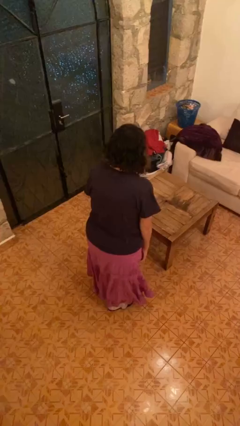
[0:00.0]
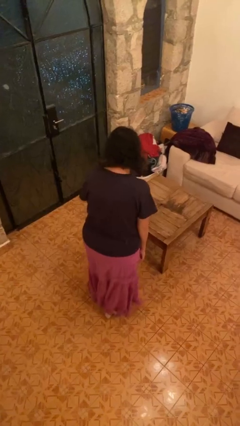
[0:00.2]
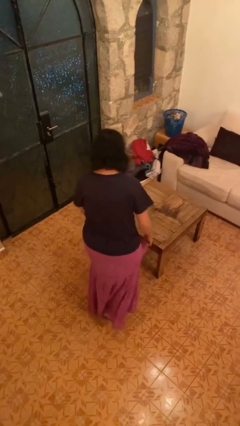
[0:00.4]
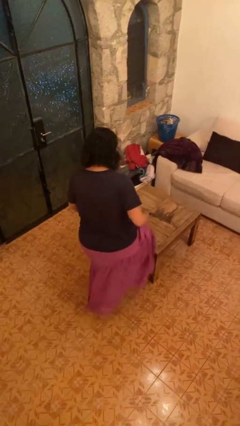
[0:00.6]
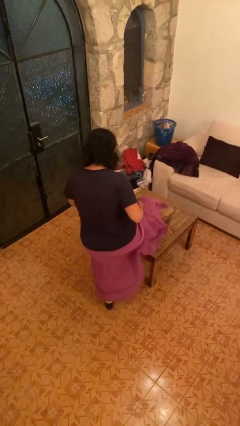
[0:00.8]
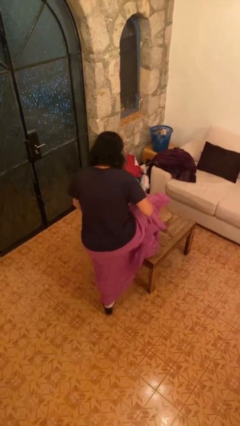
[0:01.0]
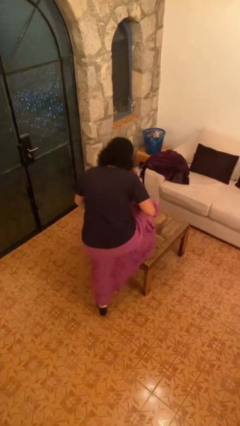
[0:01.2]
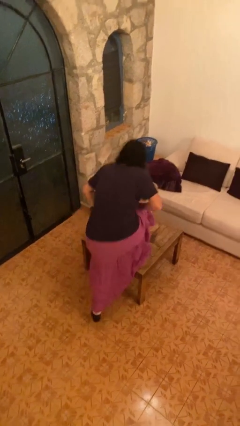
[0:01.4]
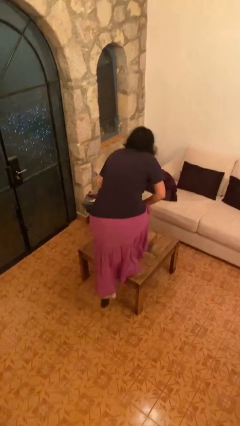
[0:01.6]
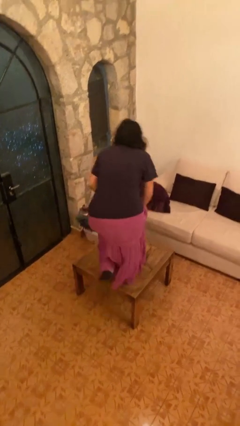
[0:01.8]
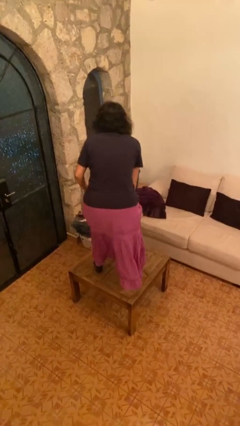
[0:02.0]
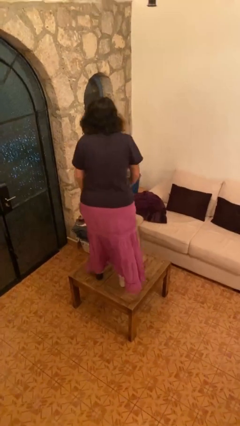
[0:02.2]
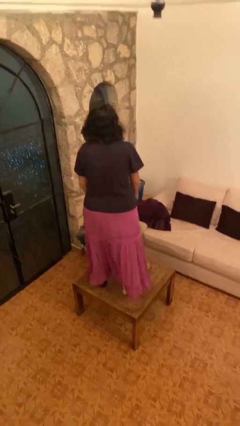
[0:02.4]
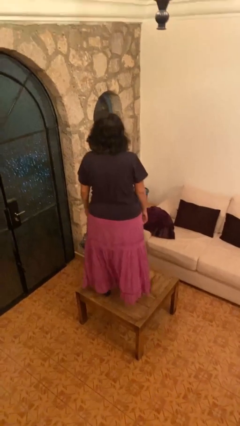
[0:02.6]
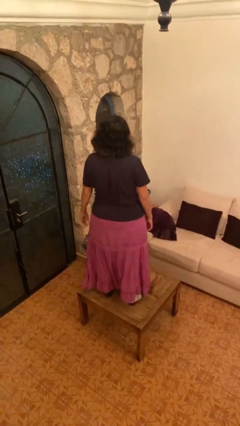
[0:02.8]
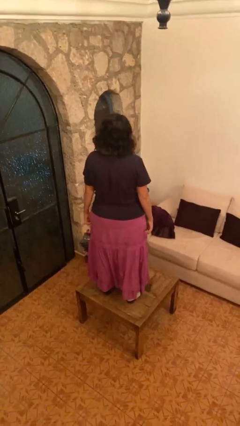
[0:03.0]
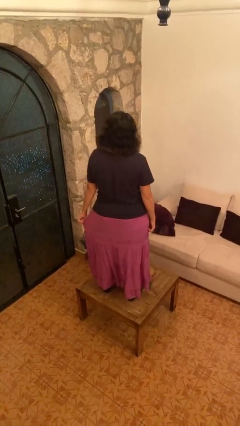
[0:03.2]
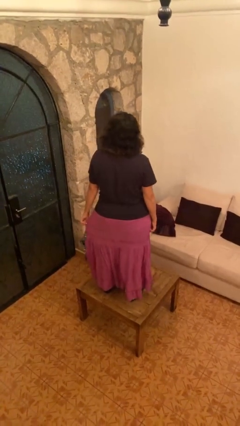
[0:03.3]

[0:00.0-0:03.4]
person climbs on table

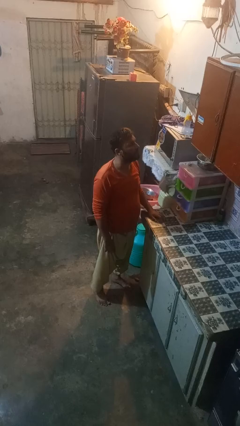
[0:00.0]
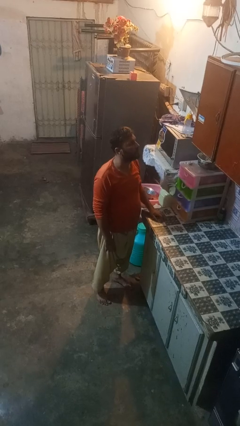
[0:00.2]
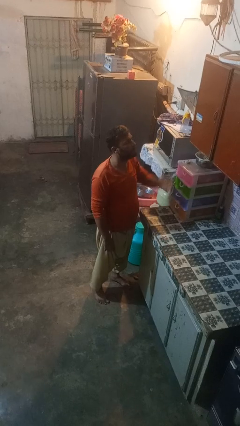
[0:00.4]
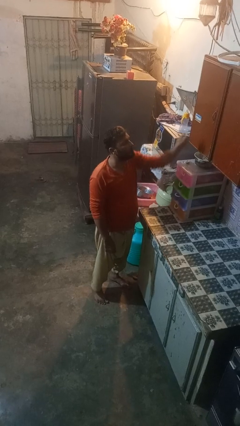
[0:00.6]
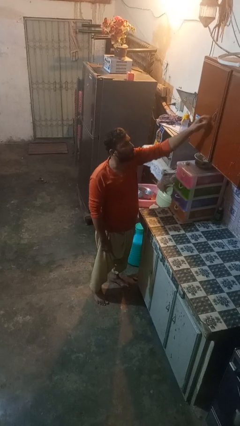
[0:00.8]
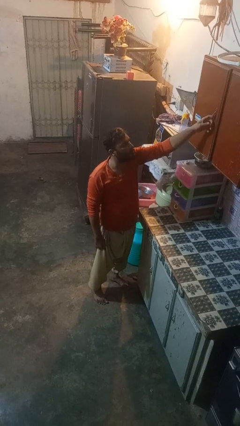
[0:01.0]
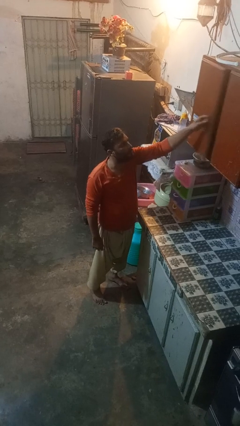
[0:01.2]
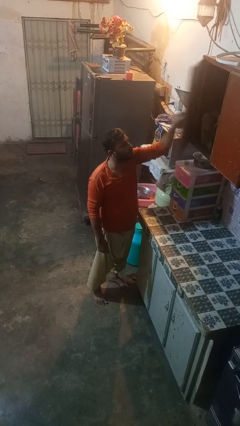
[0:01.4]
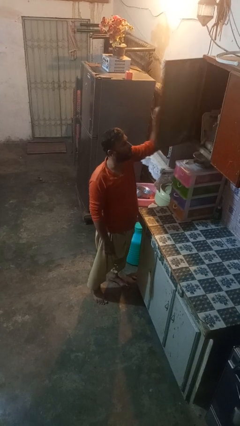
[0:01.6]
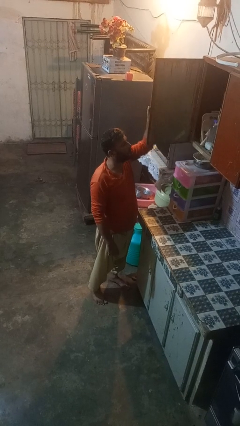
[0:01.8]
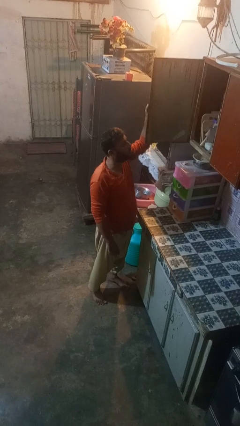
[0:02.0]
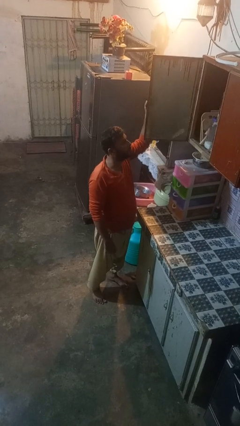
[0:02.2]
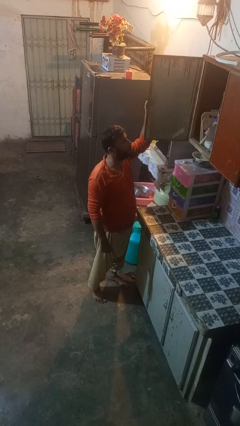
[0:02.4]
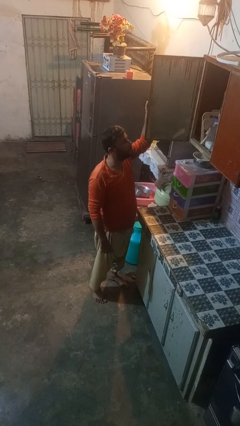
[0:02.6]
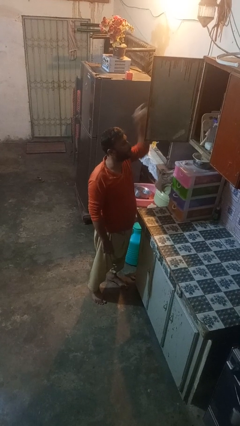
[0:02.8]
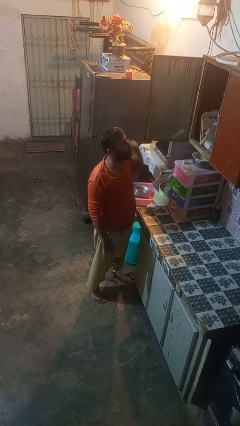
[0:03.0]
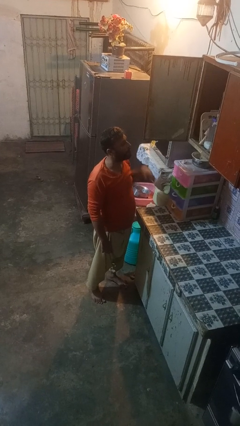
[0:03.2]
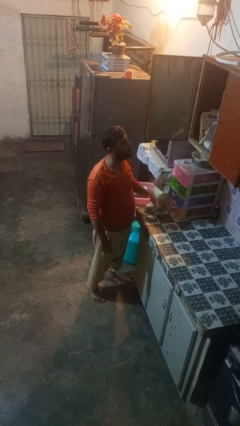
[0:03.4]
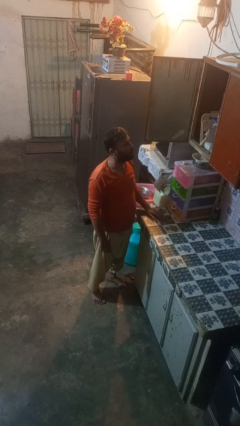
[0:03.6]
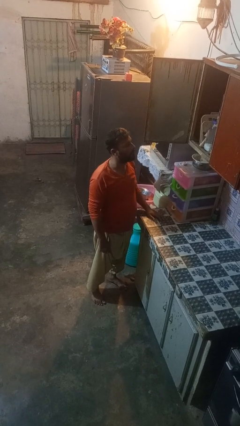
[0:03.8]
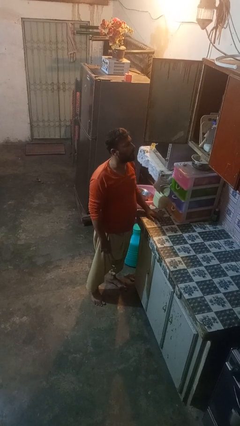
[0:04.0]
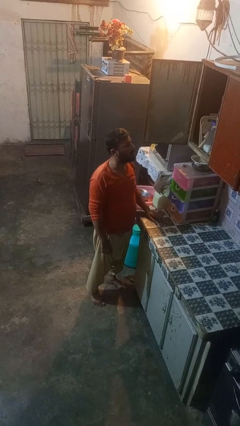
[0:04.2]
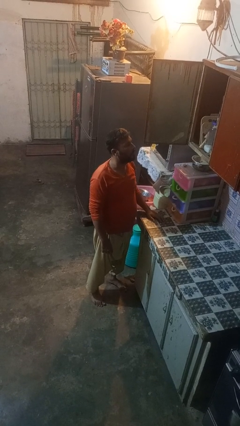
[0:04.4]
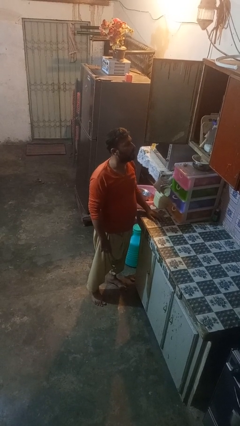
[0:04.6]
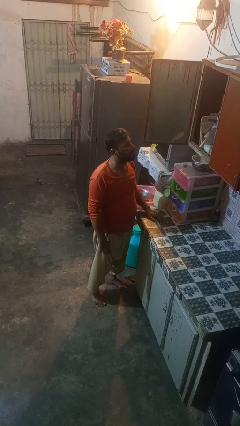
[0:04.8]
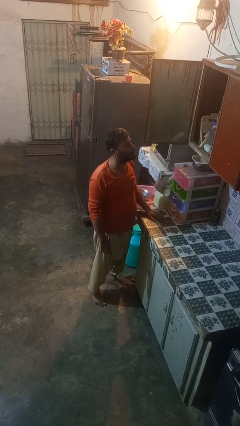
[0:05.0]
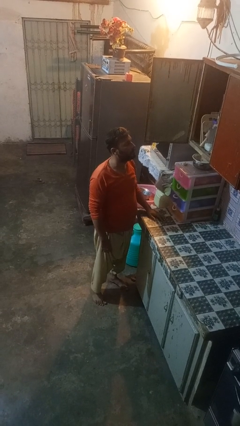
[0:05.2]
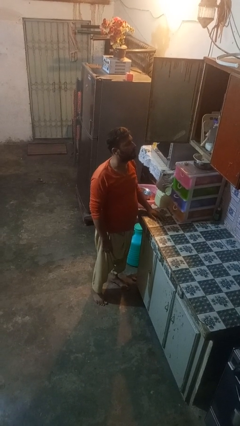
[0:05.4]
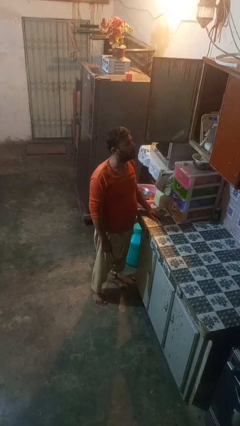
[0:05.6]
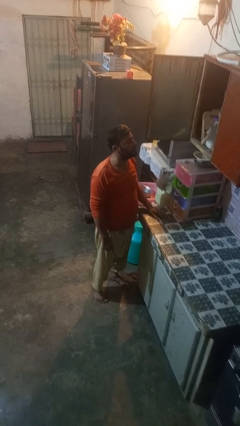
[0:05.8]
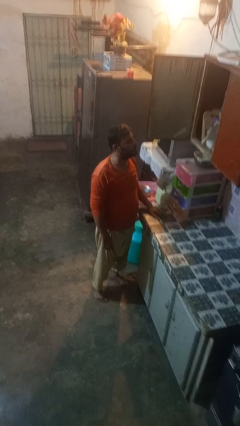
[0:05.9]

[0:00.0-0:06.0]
person opens cabinet

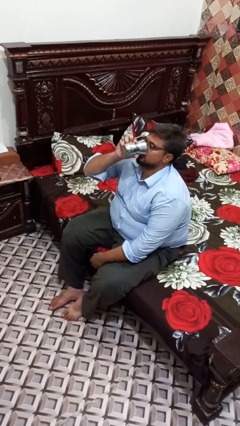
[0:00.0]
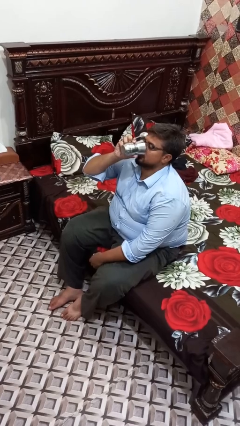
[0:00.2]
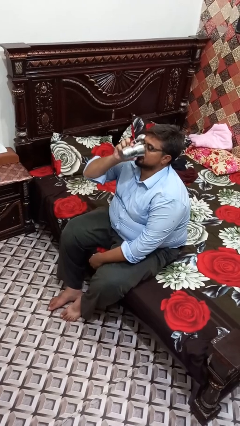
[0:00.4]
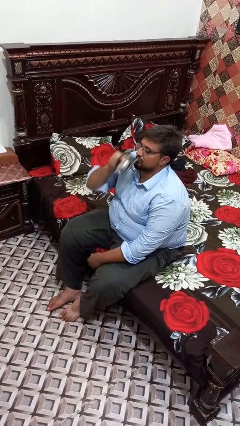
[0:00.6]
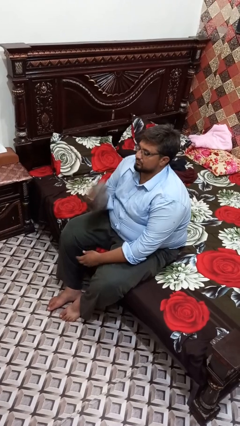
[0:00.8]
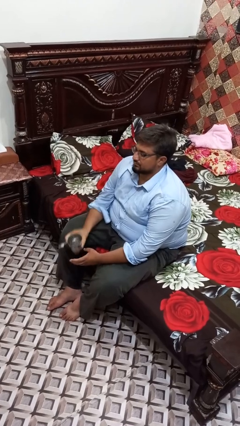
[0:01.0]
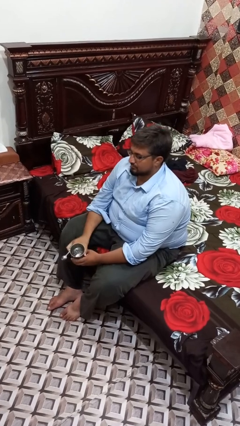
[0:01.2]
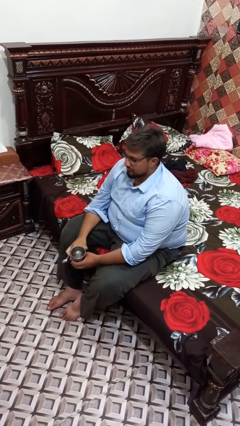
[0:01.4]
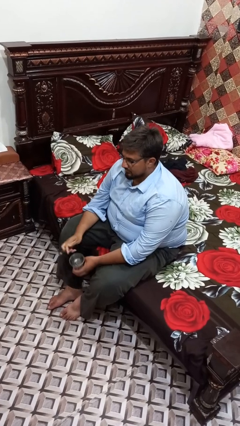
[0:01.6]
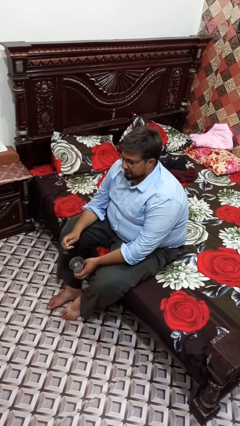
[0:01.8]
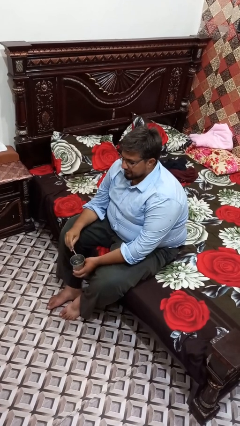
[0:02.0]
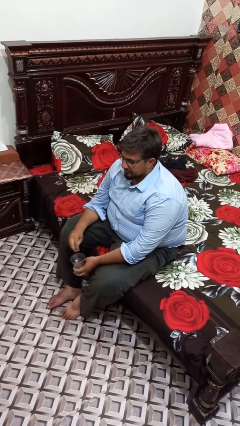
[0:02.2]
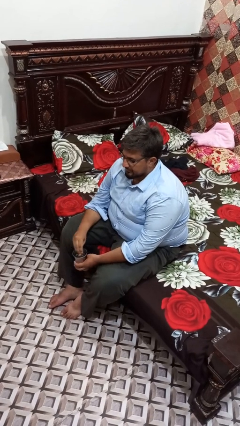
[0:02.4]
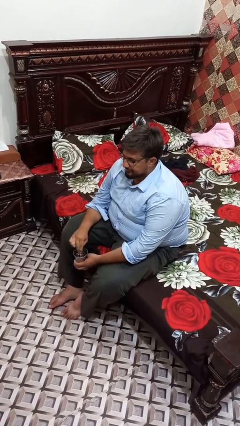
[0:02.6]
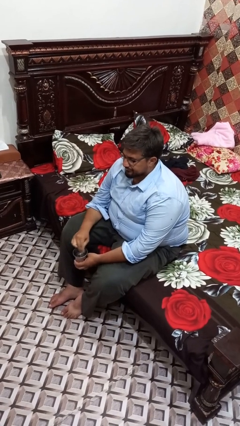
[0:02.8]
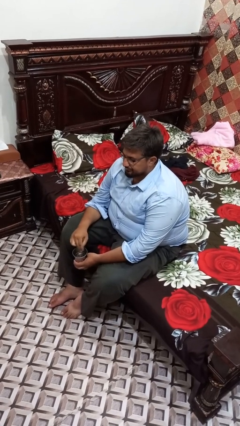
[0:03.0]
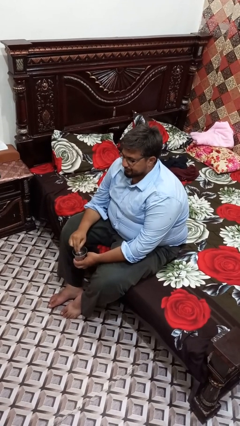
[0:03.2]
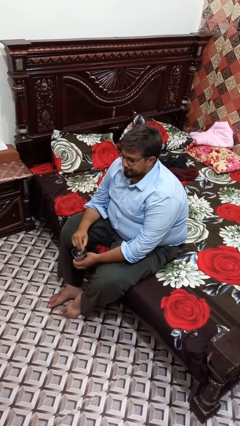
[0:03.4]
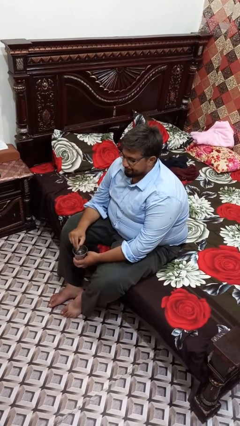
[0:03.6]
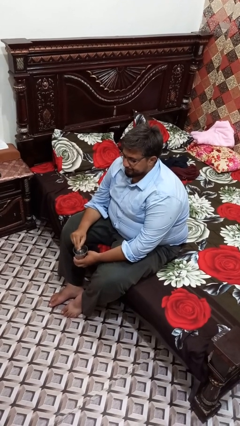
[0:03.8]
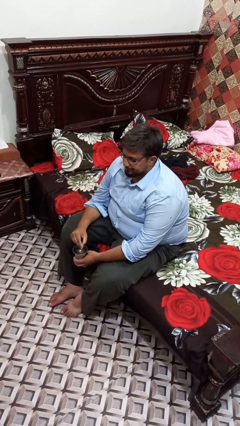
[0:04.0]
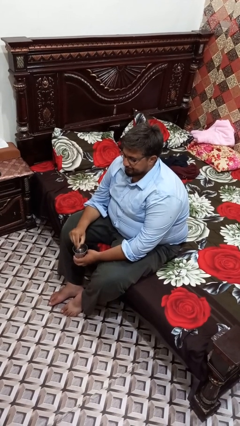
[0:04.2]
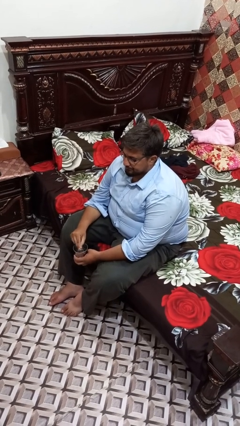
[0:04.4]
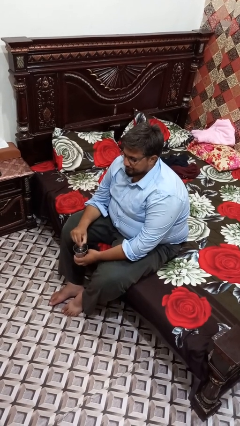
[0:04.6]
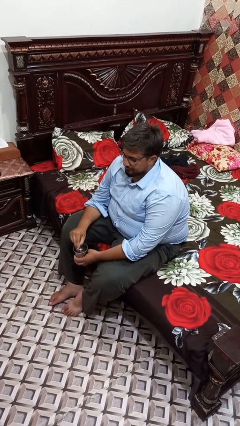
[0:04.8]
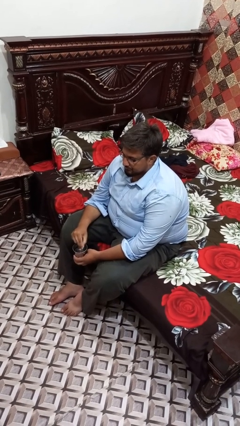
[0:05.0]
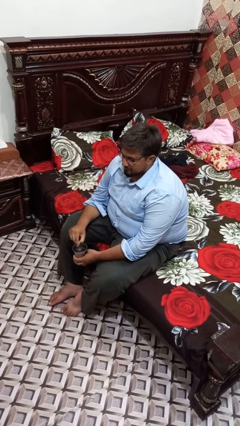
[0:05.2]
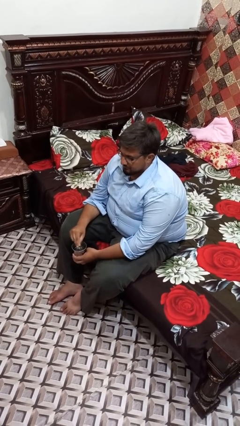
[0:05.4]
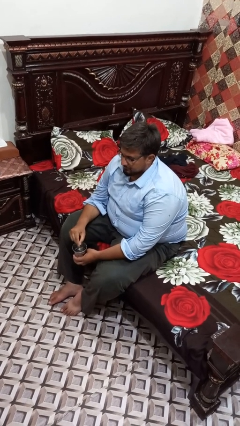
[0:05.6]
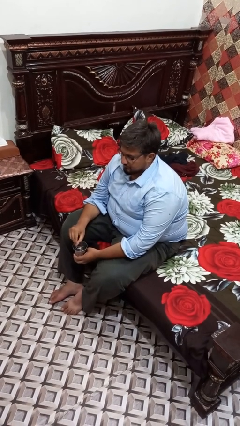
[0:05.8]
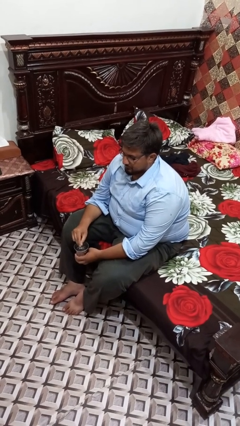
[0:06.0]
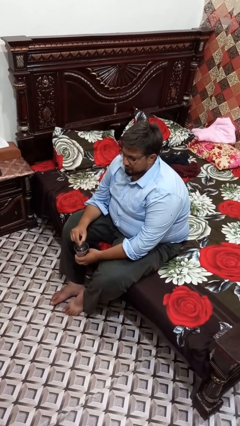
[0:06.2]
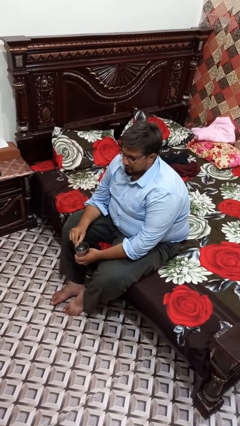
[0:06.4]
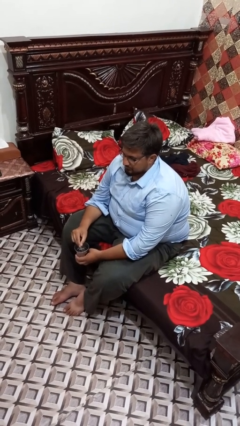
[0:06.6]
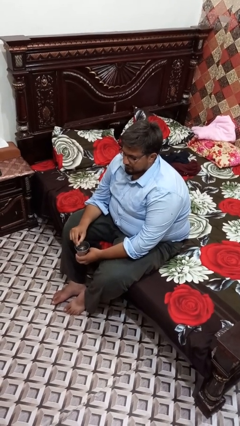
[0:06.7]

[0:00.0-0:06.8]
person stirs mug

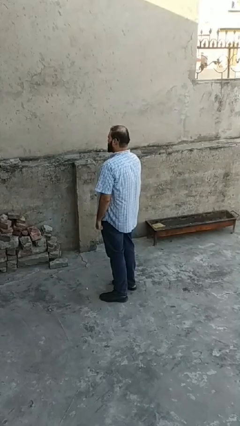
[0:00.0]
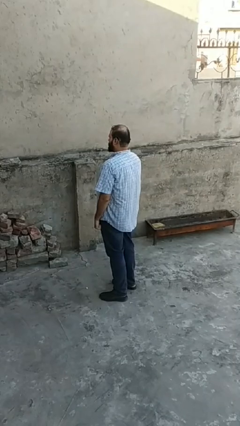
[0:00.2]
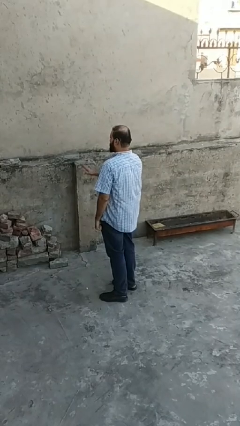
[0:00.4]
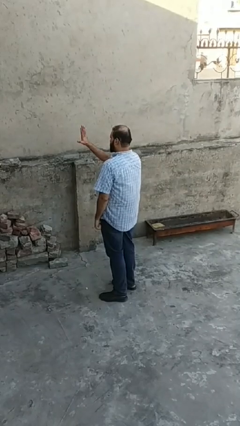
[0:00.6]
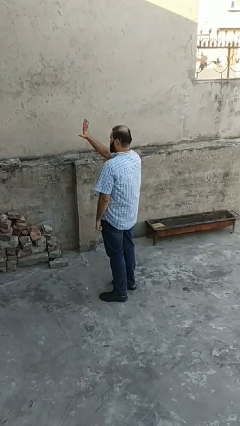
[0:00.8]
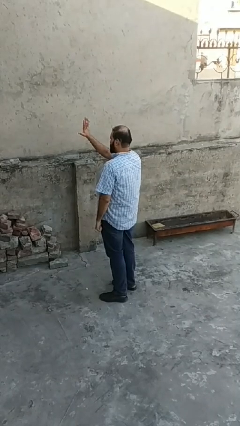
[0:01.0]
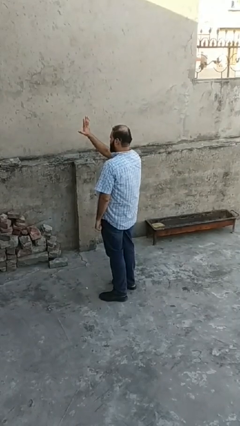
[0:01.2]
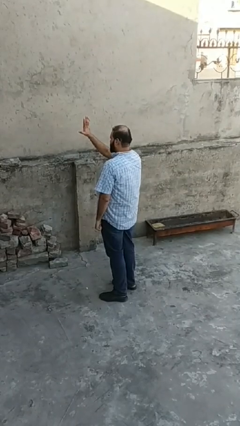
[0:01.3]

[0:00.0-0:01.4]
person gestures number five
